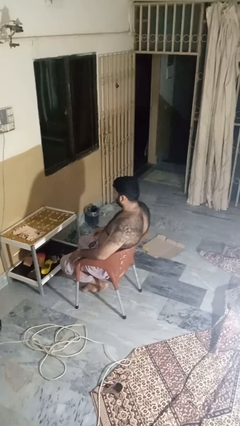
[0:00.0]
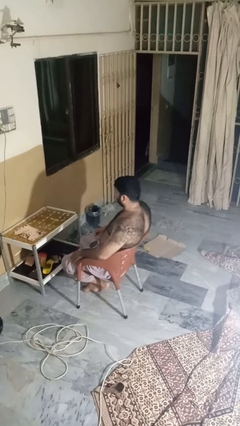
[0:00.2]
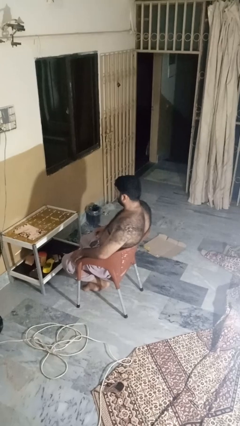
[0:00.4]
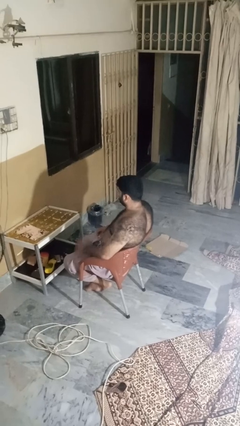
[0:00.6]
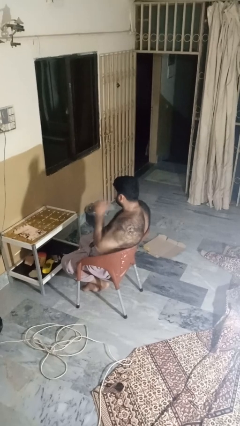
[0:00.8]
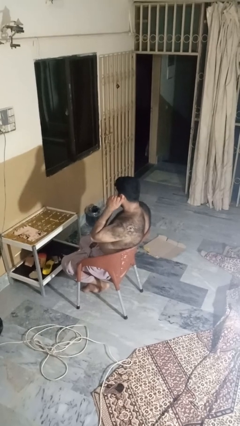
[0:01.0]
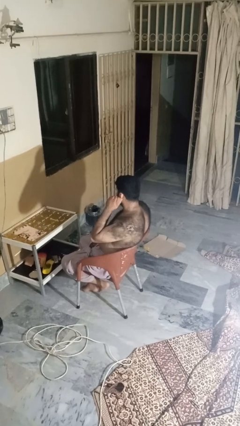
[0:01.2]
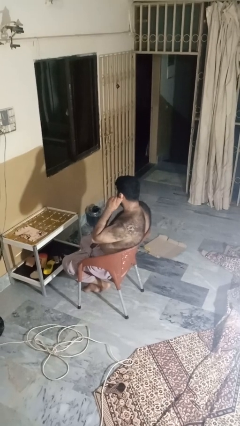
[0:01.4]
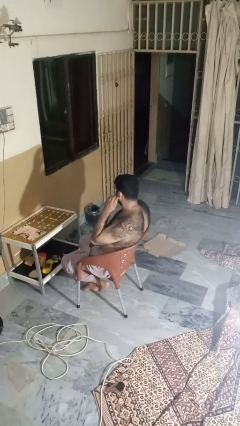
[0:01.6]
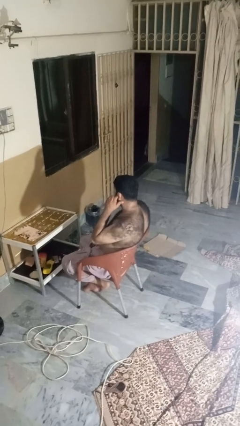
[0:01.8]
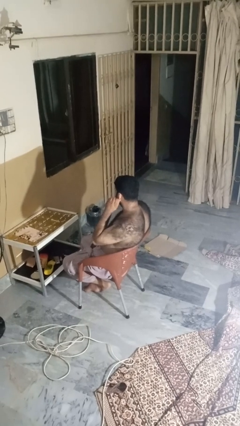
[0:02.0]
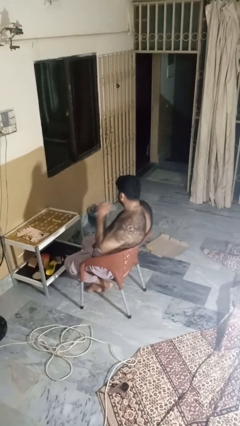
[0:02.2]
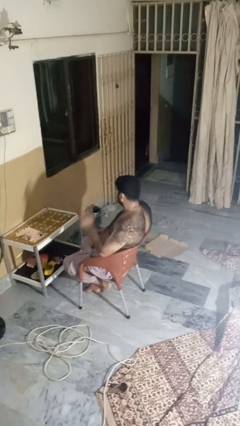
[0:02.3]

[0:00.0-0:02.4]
person touches earlobe

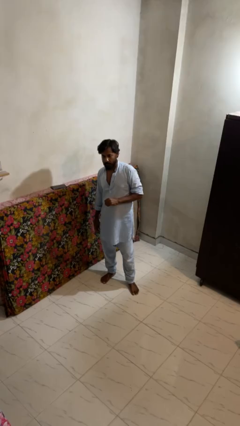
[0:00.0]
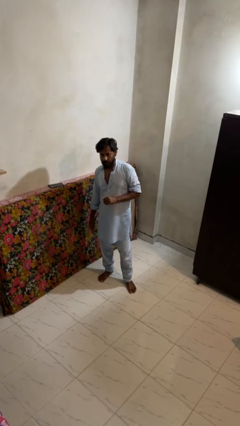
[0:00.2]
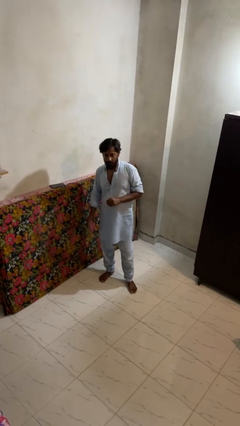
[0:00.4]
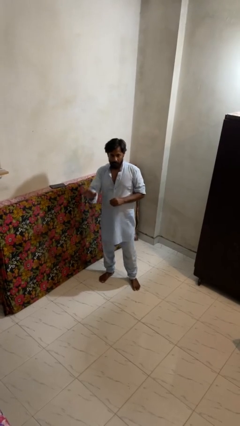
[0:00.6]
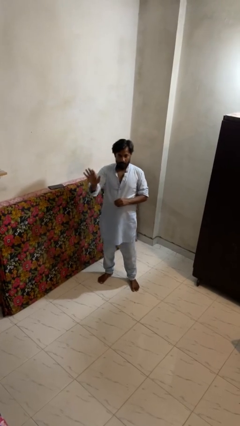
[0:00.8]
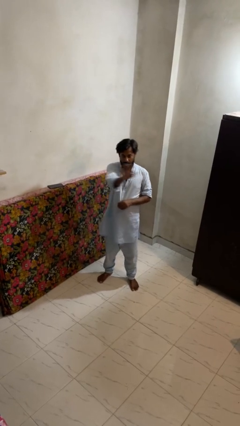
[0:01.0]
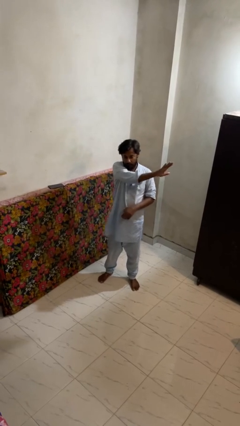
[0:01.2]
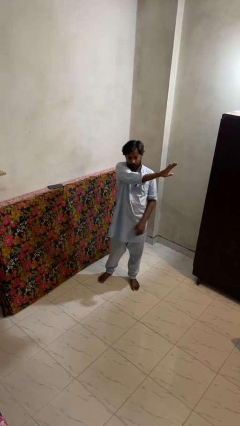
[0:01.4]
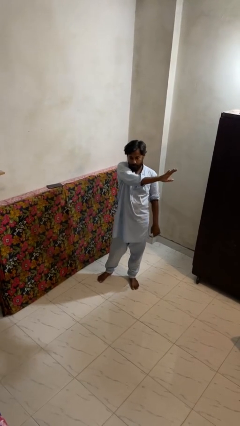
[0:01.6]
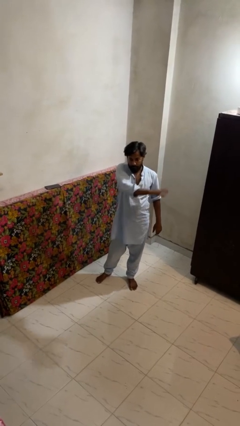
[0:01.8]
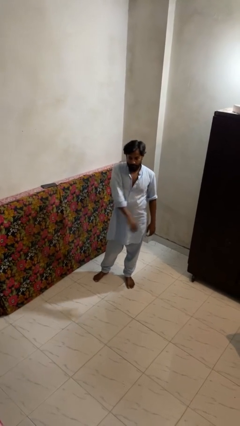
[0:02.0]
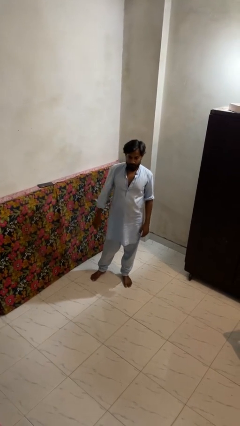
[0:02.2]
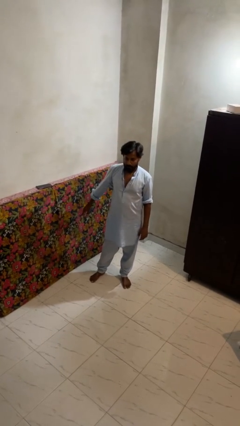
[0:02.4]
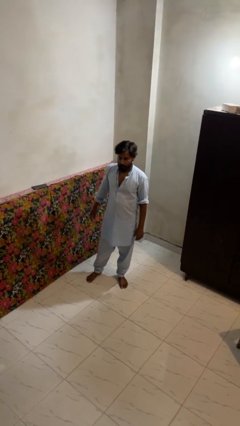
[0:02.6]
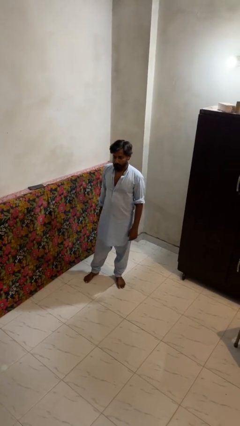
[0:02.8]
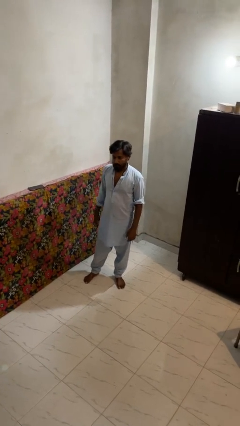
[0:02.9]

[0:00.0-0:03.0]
person gestures swipe left

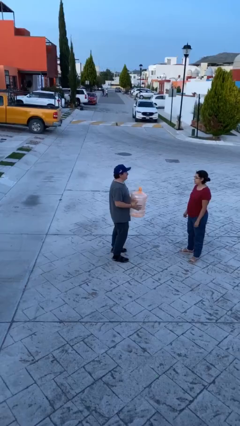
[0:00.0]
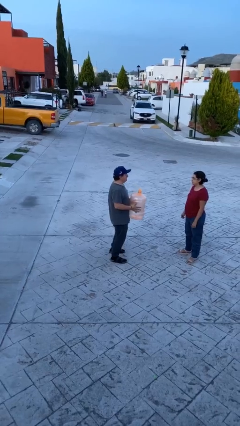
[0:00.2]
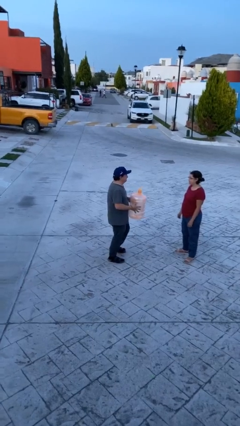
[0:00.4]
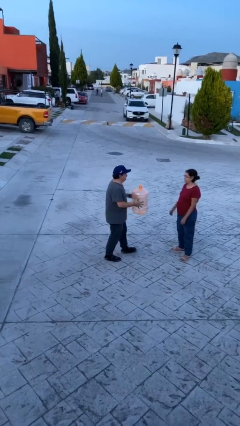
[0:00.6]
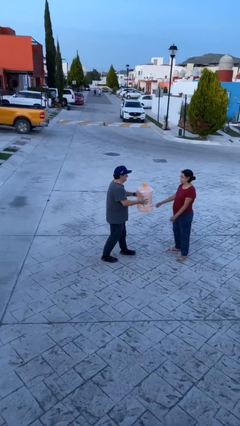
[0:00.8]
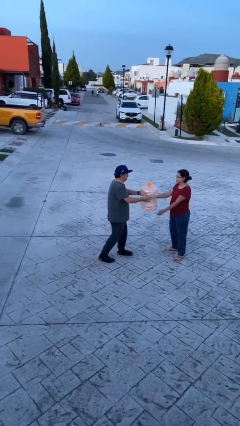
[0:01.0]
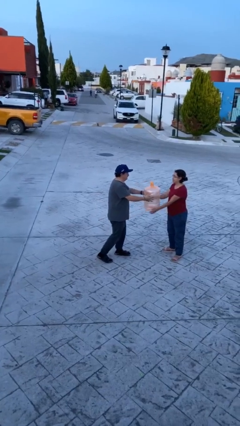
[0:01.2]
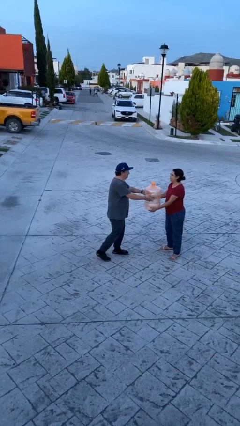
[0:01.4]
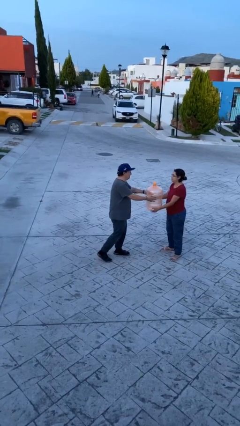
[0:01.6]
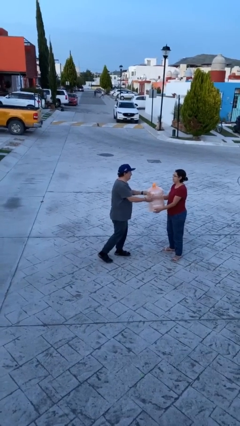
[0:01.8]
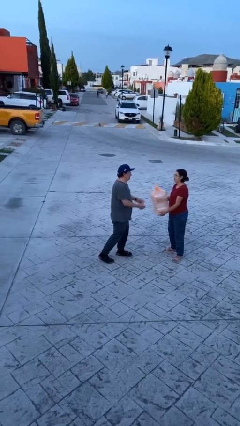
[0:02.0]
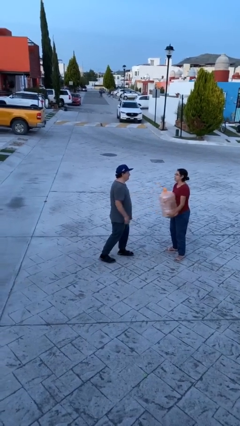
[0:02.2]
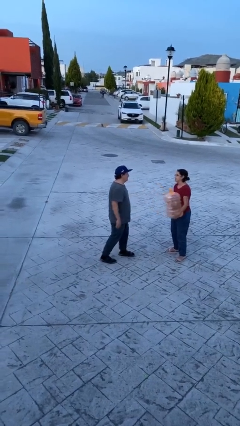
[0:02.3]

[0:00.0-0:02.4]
person transfers object to person

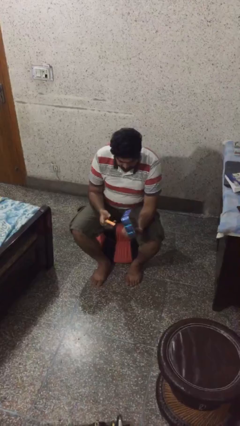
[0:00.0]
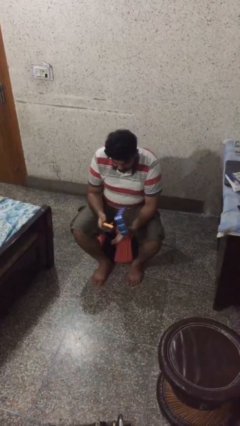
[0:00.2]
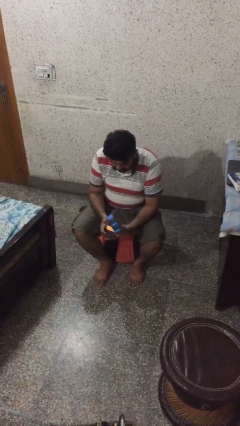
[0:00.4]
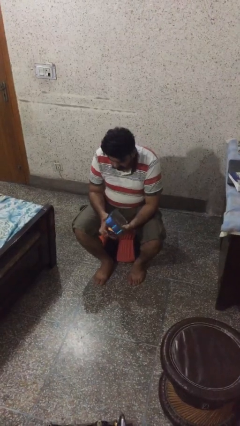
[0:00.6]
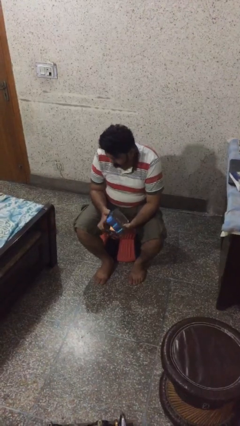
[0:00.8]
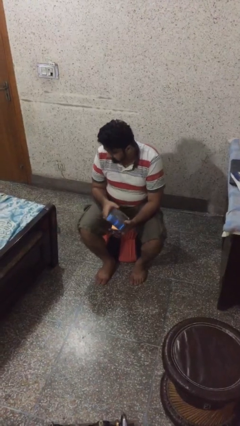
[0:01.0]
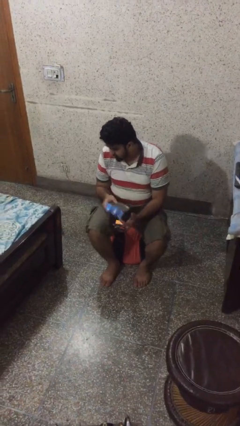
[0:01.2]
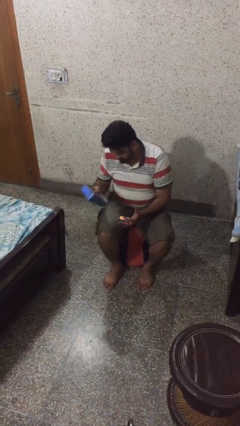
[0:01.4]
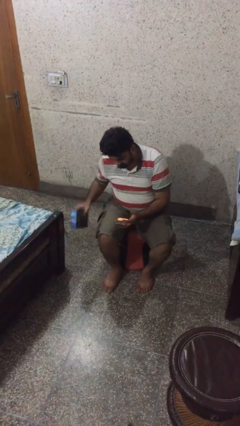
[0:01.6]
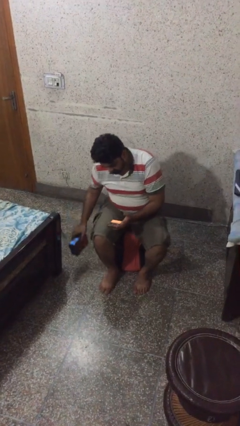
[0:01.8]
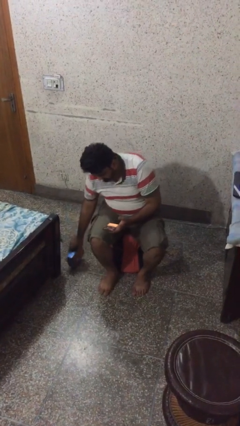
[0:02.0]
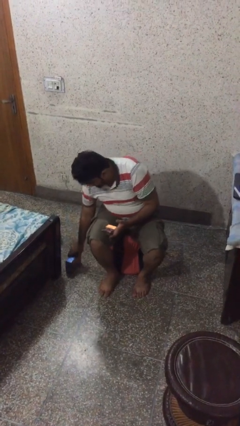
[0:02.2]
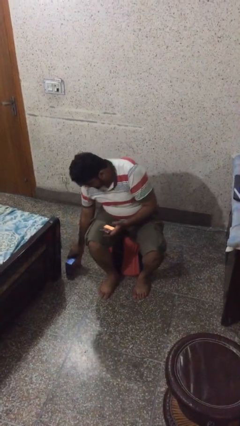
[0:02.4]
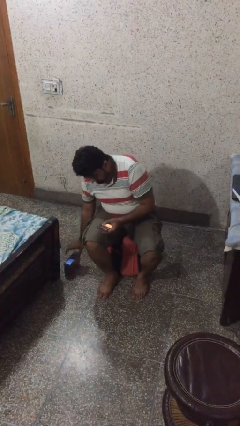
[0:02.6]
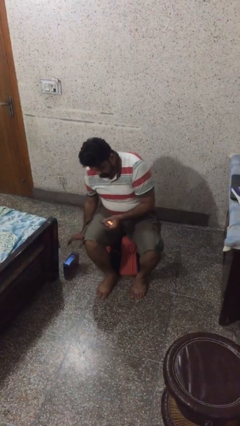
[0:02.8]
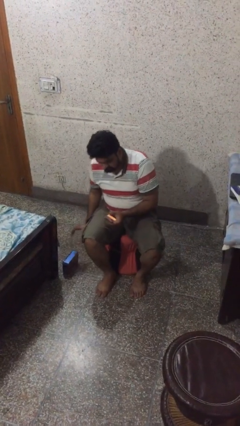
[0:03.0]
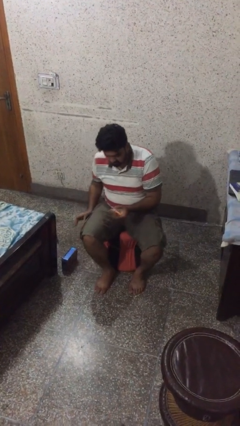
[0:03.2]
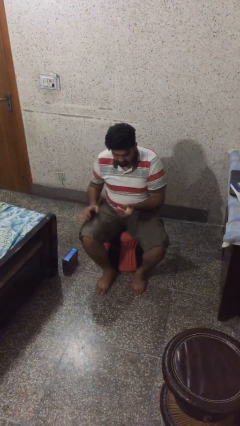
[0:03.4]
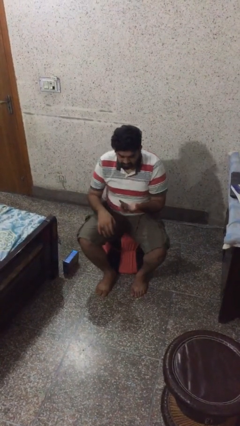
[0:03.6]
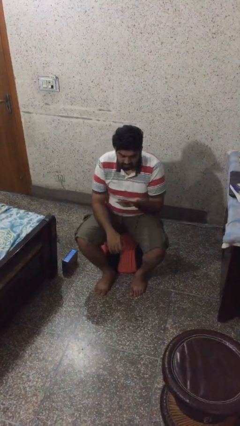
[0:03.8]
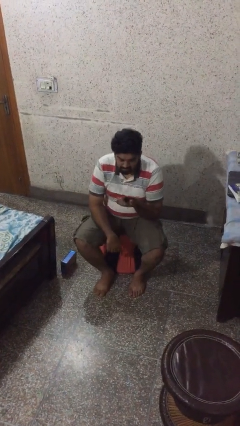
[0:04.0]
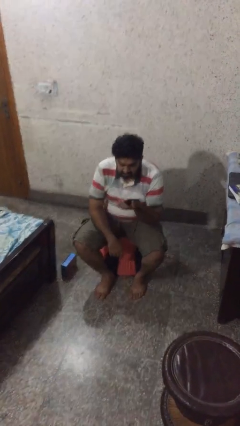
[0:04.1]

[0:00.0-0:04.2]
person puts down object on floor

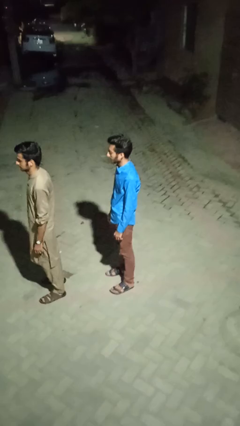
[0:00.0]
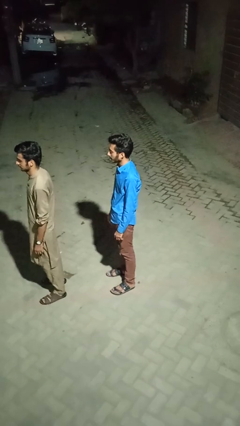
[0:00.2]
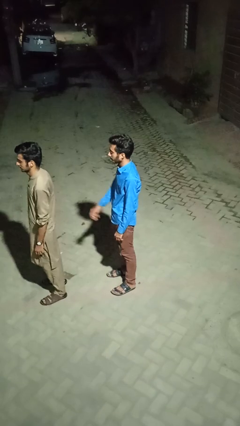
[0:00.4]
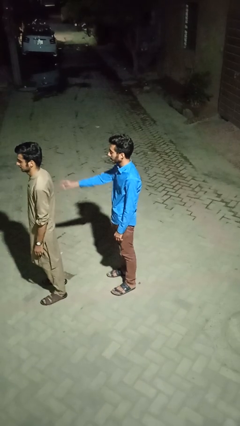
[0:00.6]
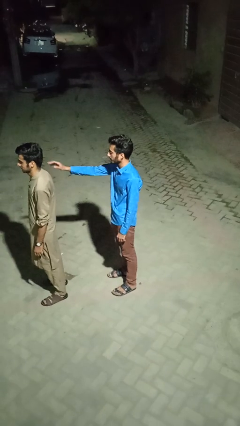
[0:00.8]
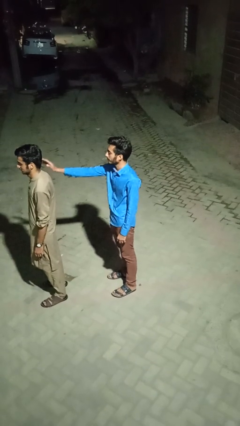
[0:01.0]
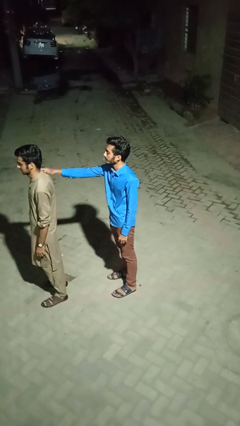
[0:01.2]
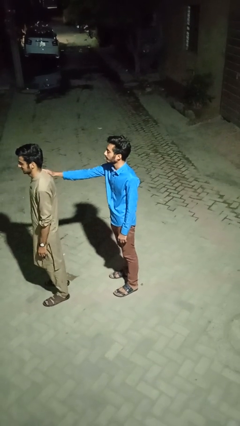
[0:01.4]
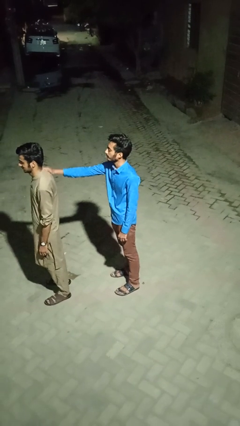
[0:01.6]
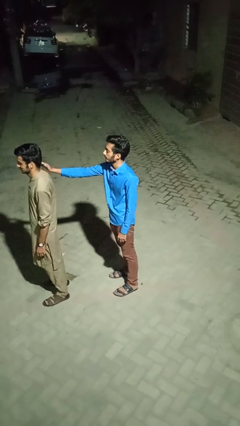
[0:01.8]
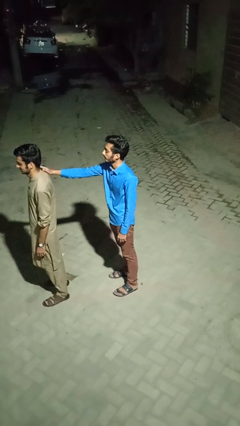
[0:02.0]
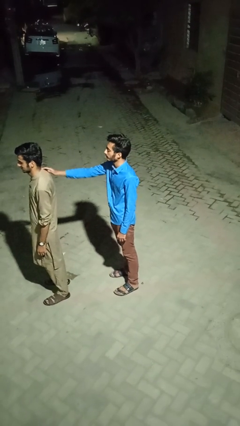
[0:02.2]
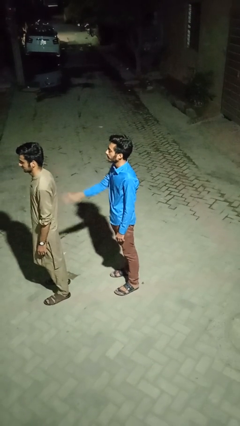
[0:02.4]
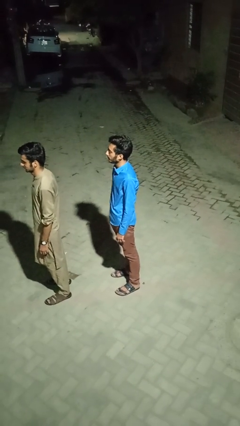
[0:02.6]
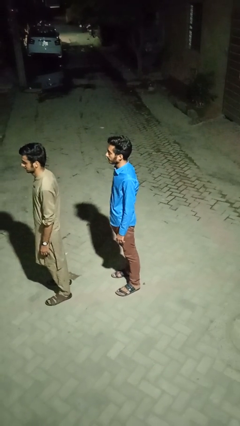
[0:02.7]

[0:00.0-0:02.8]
person touches back of person

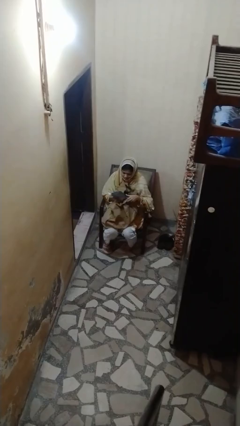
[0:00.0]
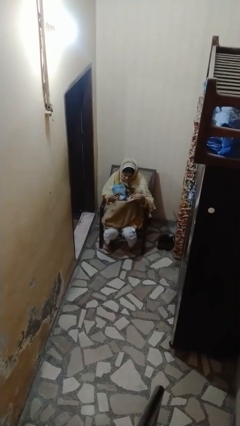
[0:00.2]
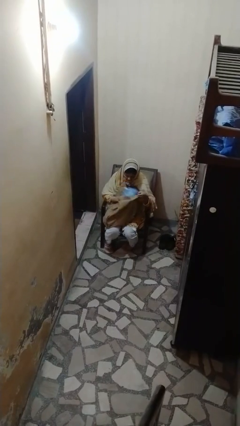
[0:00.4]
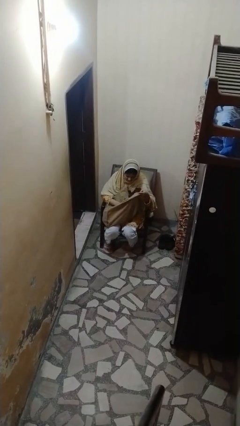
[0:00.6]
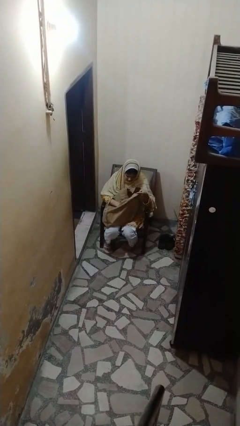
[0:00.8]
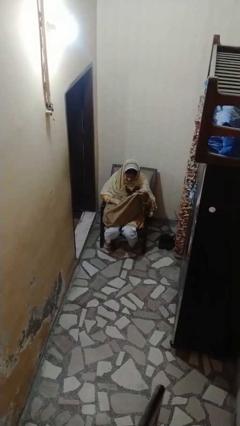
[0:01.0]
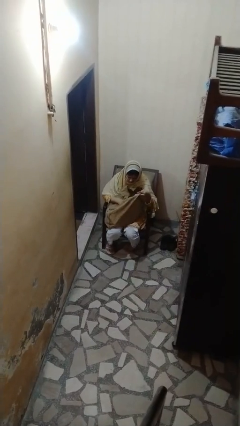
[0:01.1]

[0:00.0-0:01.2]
person puts object into bag

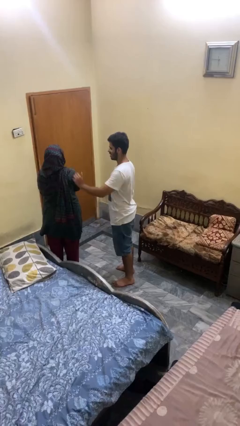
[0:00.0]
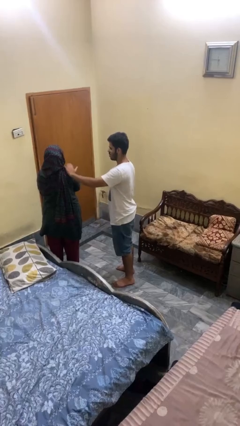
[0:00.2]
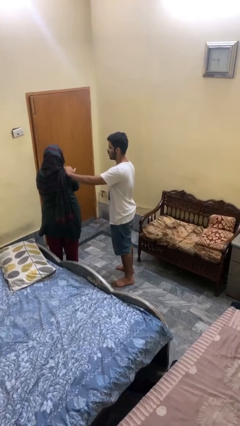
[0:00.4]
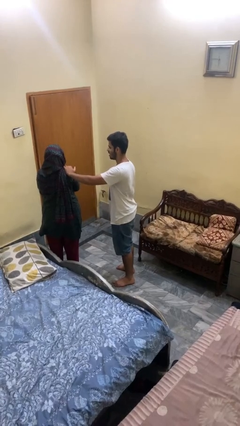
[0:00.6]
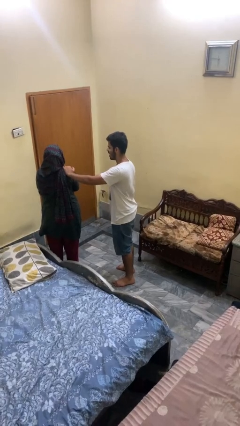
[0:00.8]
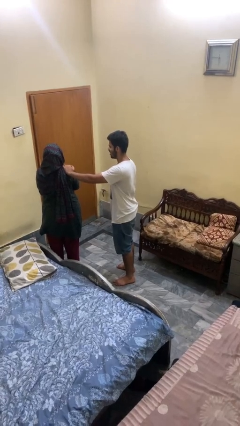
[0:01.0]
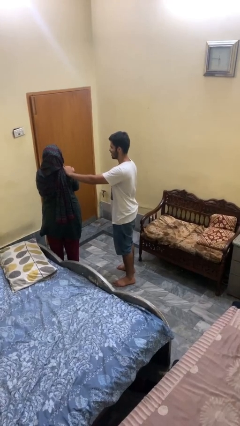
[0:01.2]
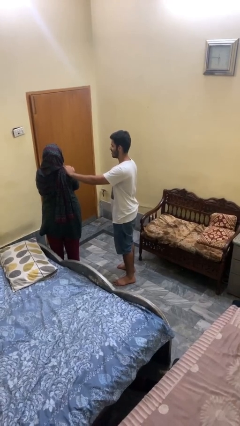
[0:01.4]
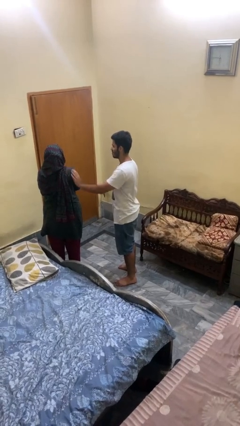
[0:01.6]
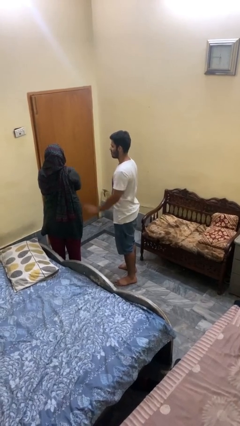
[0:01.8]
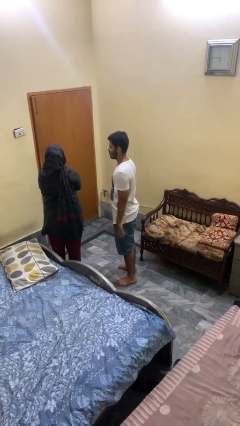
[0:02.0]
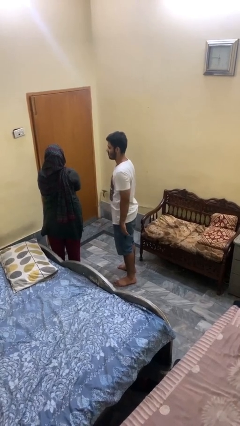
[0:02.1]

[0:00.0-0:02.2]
person pounds shoulders of person
